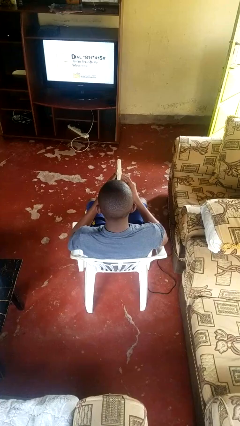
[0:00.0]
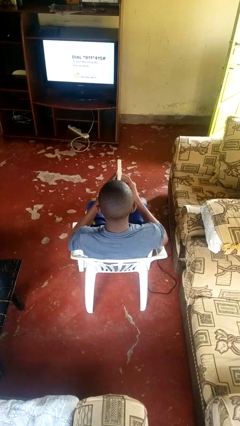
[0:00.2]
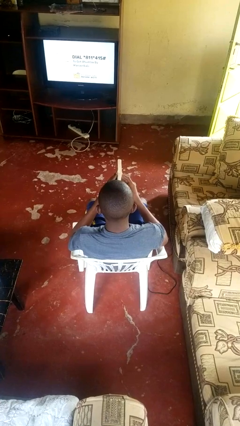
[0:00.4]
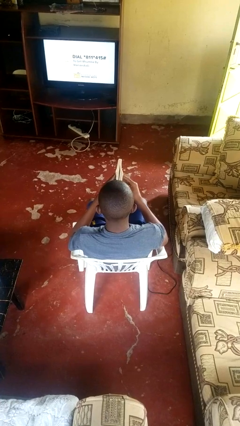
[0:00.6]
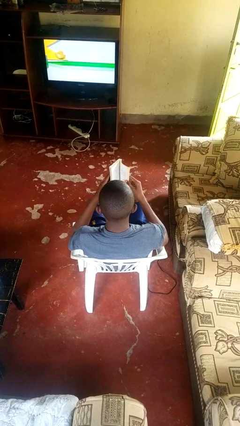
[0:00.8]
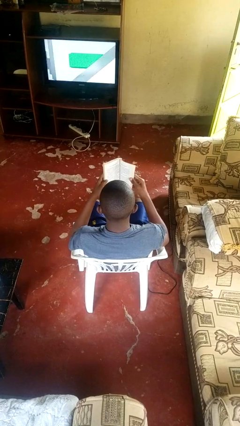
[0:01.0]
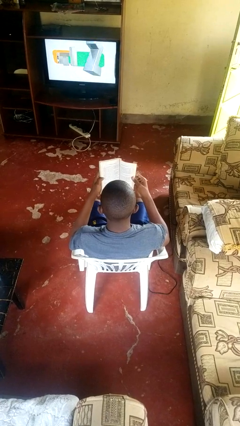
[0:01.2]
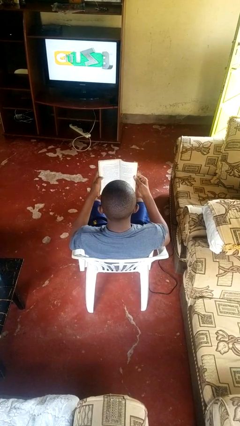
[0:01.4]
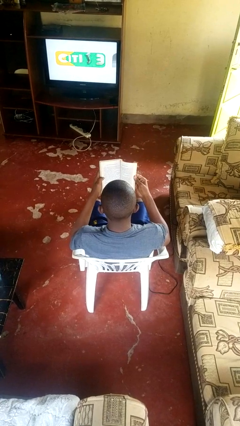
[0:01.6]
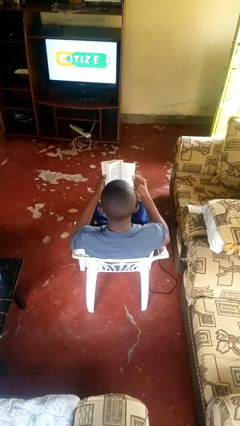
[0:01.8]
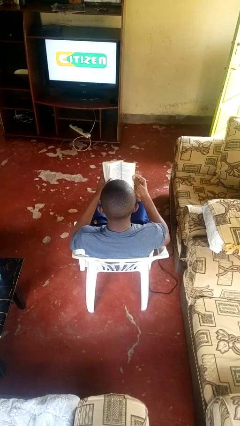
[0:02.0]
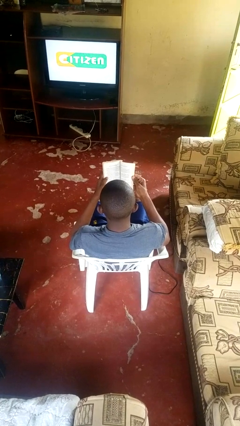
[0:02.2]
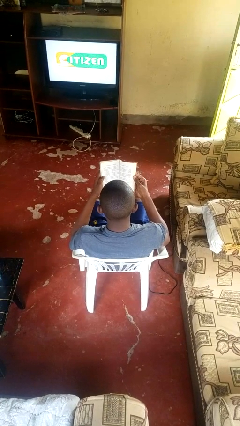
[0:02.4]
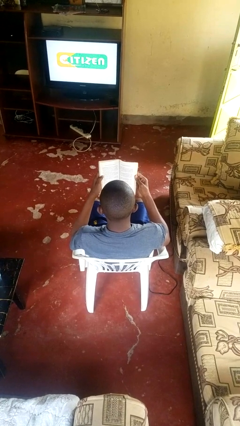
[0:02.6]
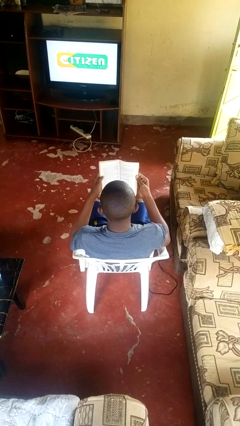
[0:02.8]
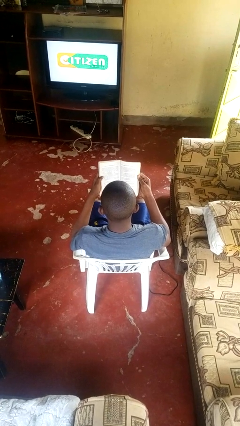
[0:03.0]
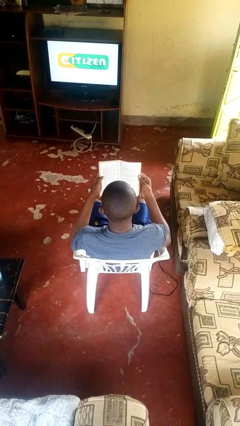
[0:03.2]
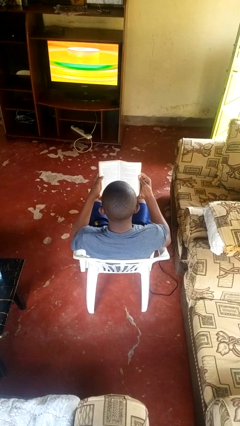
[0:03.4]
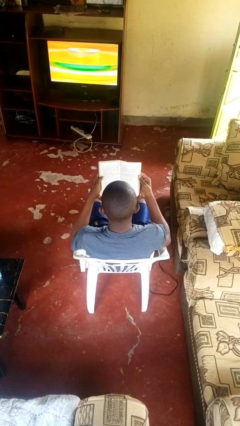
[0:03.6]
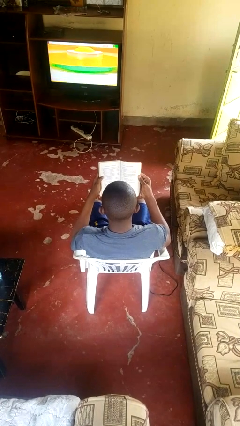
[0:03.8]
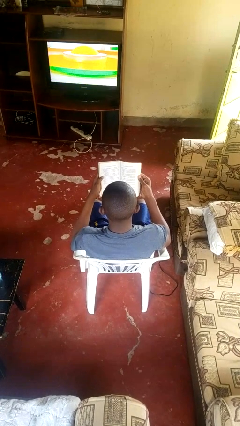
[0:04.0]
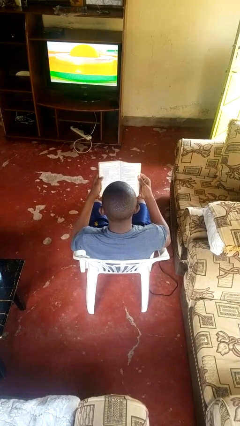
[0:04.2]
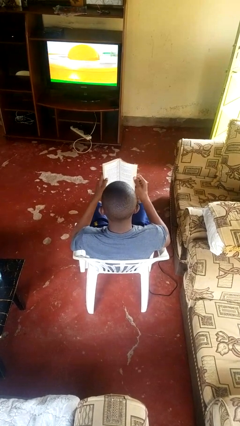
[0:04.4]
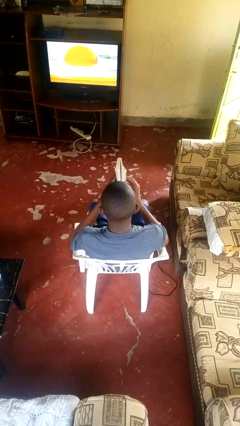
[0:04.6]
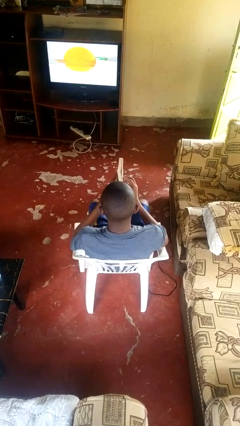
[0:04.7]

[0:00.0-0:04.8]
person reads book

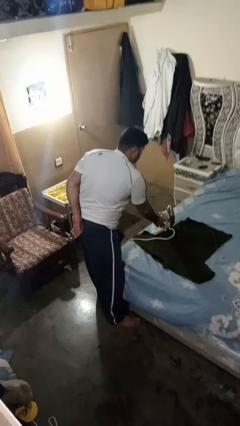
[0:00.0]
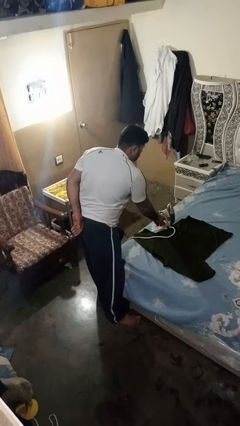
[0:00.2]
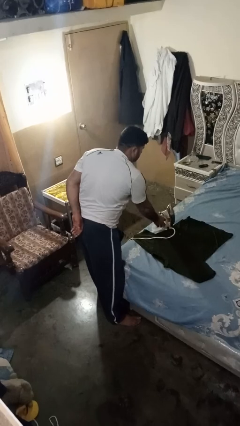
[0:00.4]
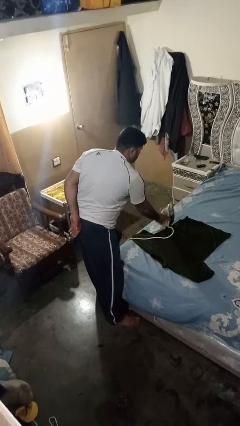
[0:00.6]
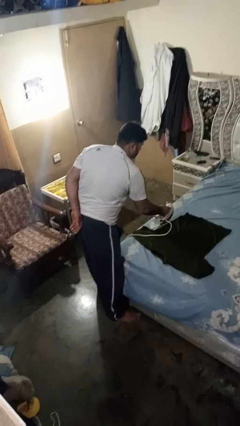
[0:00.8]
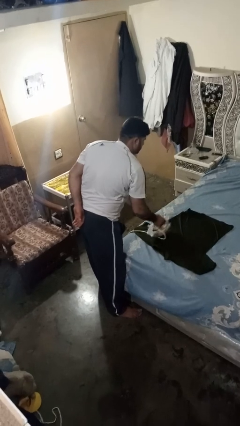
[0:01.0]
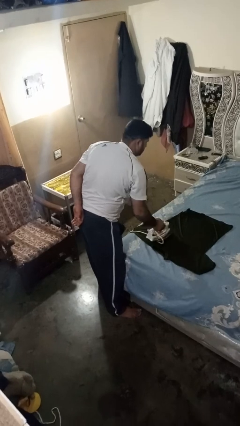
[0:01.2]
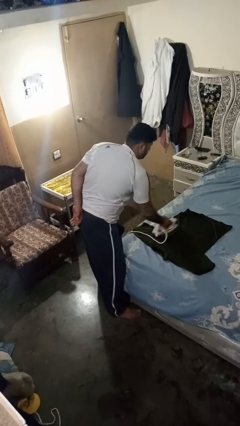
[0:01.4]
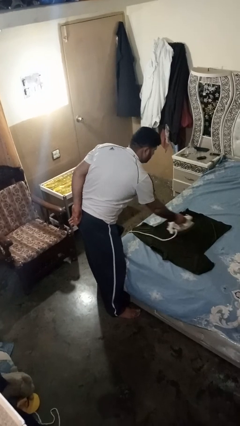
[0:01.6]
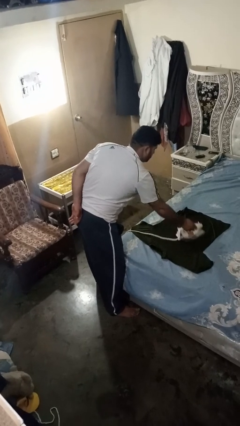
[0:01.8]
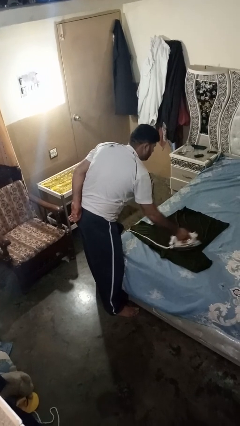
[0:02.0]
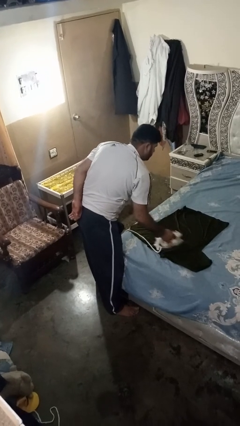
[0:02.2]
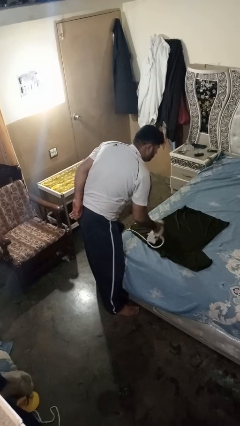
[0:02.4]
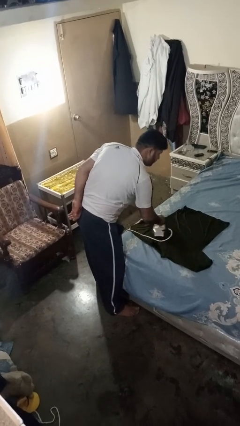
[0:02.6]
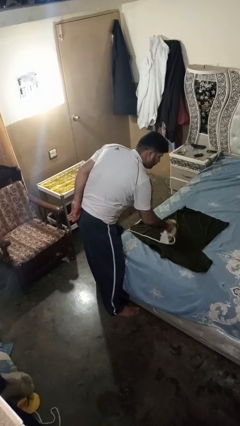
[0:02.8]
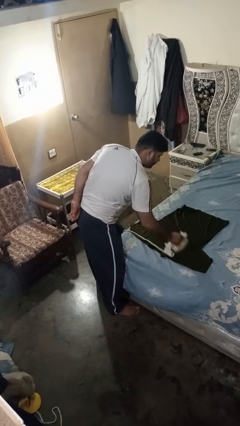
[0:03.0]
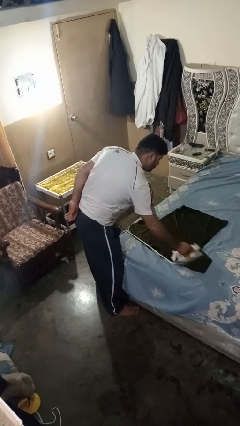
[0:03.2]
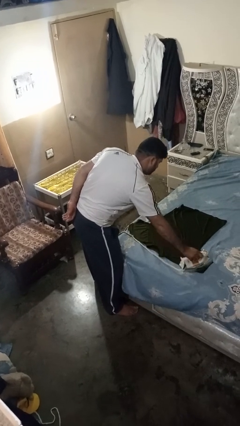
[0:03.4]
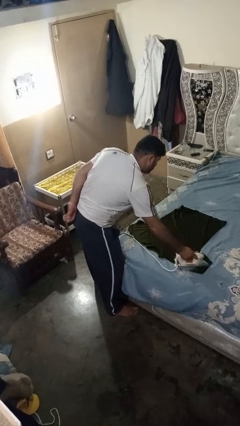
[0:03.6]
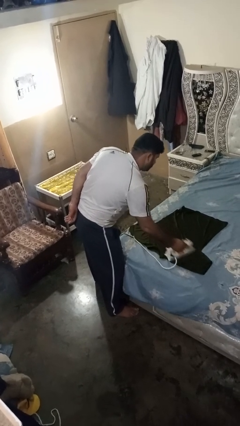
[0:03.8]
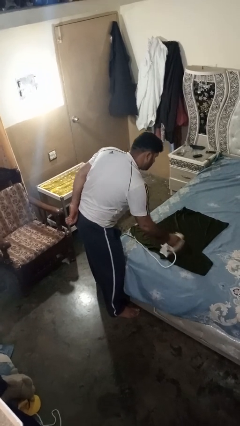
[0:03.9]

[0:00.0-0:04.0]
person irons clothes

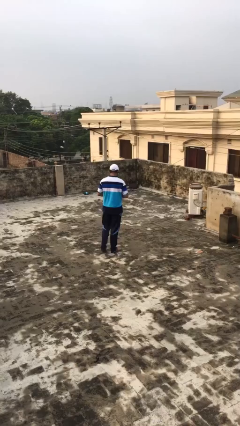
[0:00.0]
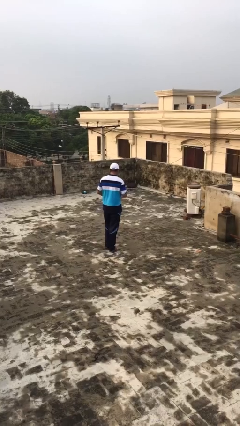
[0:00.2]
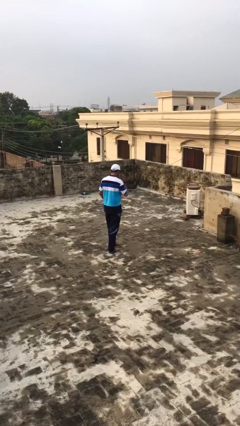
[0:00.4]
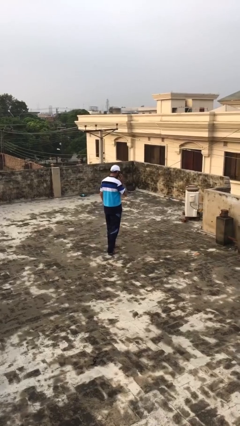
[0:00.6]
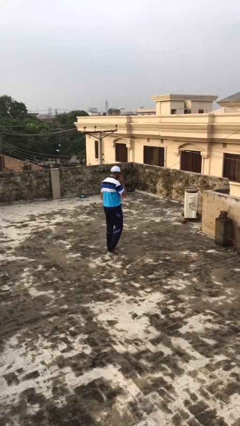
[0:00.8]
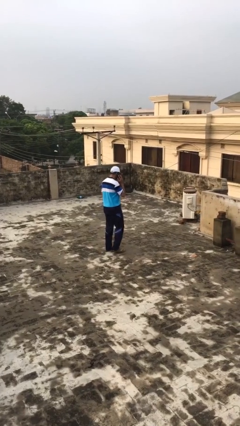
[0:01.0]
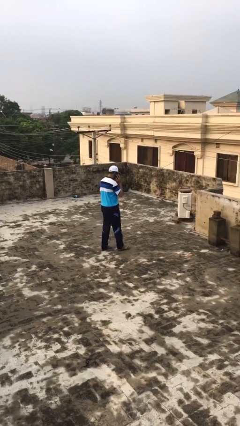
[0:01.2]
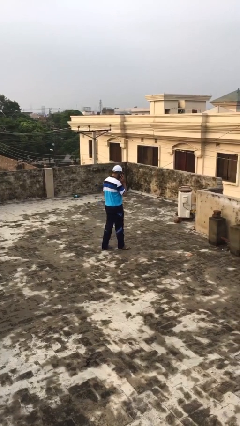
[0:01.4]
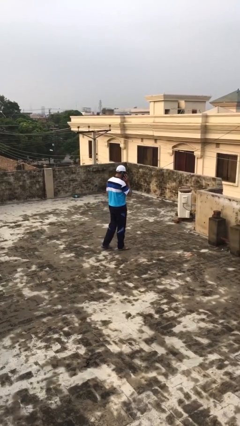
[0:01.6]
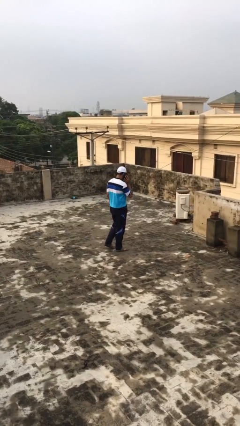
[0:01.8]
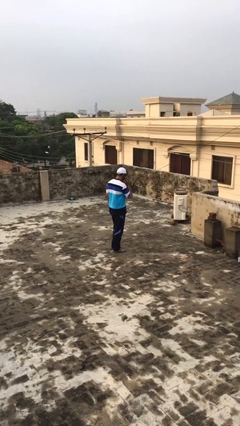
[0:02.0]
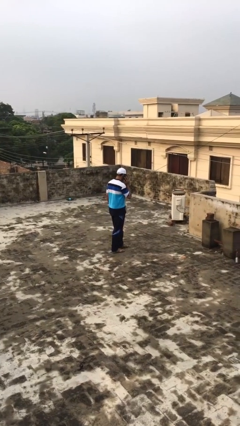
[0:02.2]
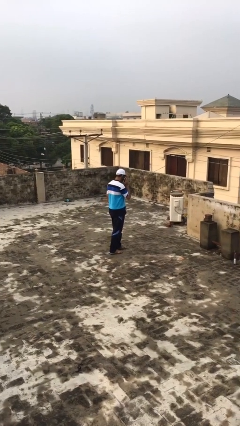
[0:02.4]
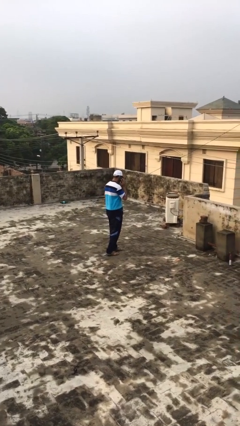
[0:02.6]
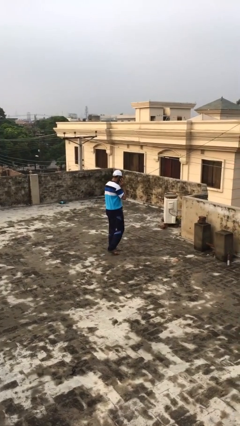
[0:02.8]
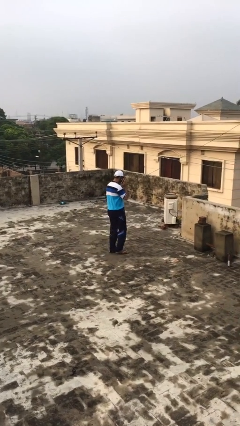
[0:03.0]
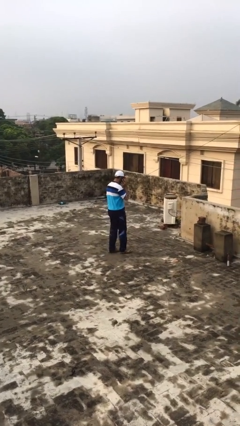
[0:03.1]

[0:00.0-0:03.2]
person talks on phone

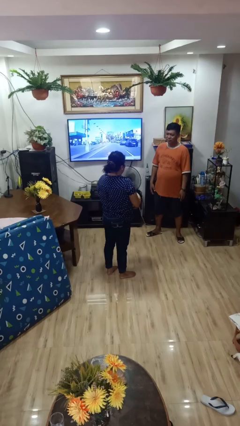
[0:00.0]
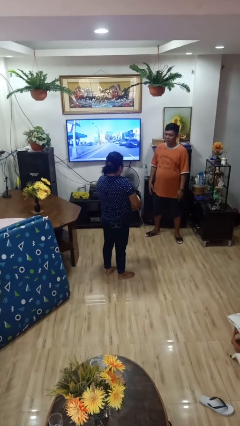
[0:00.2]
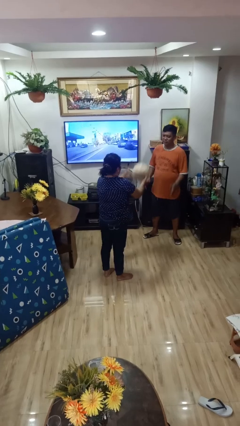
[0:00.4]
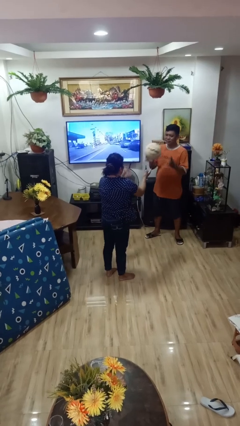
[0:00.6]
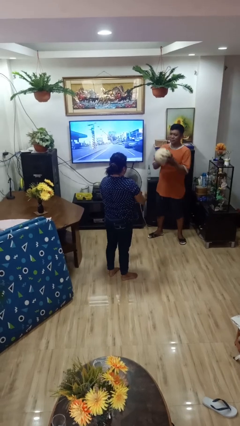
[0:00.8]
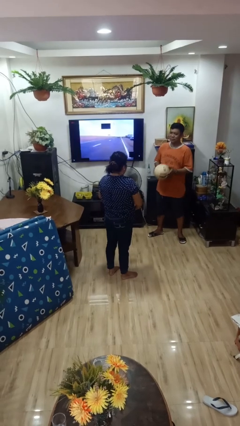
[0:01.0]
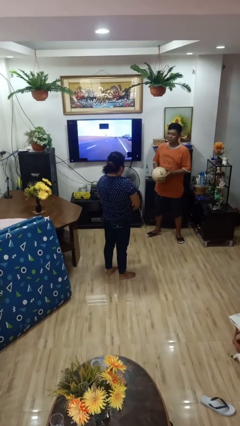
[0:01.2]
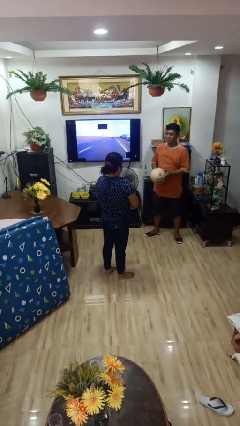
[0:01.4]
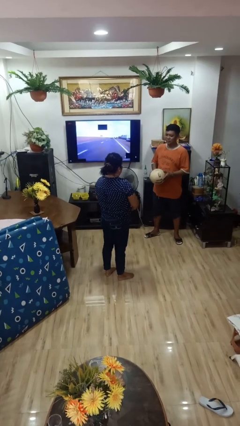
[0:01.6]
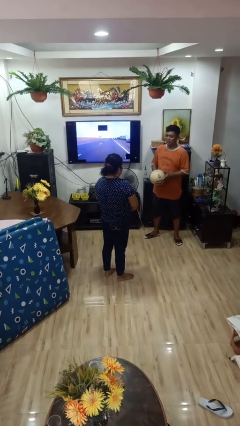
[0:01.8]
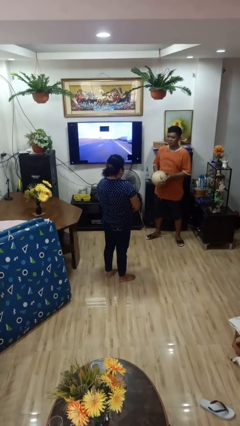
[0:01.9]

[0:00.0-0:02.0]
person throws object to person

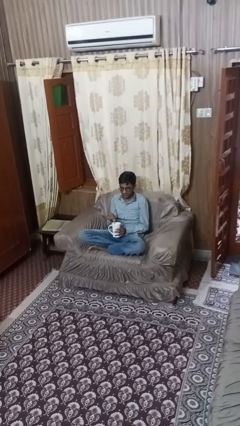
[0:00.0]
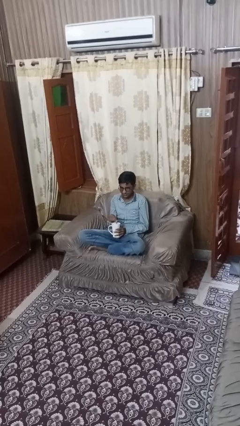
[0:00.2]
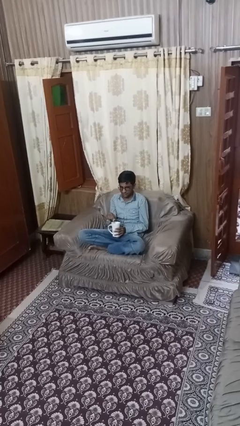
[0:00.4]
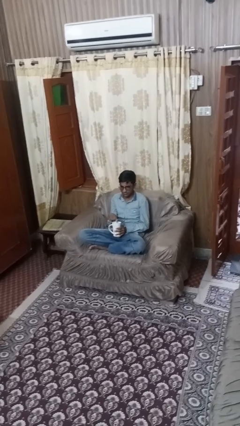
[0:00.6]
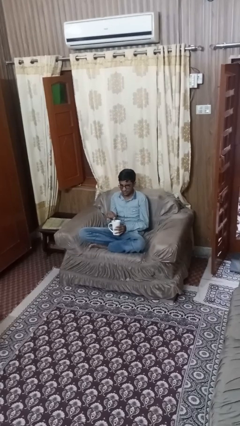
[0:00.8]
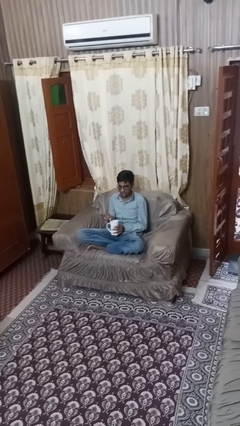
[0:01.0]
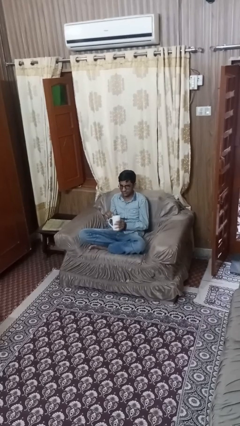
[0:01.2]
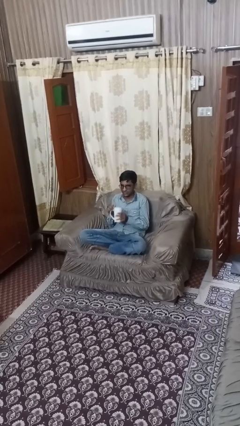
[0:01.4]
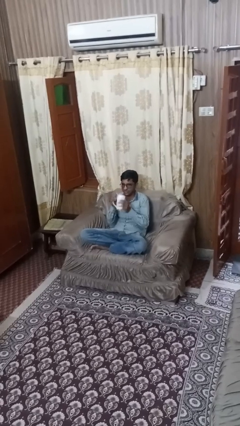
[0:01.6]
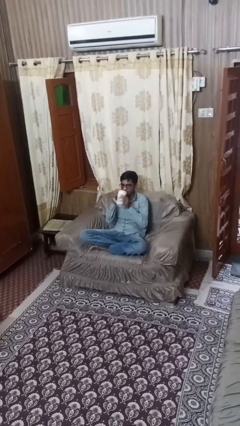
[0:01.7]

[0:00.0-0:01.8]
person stirs mug

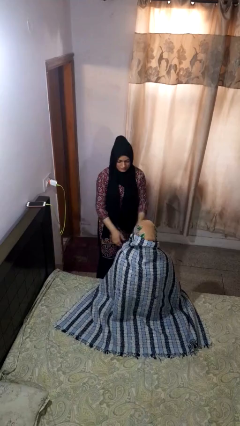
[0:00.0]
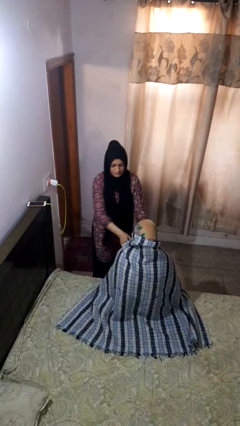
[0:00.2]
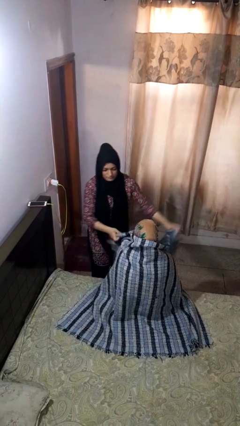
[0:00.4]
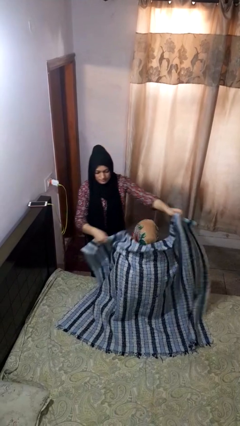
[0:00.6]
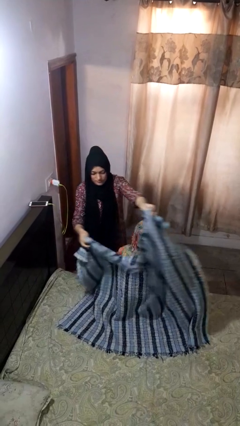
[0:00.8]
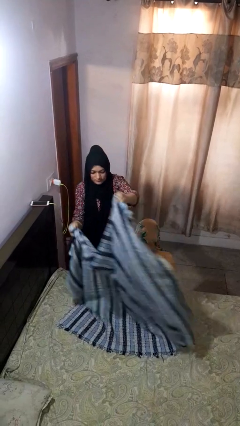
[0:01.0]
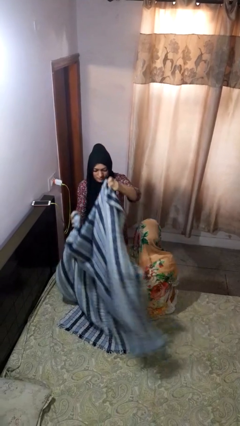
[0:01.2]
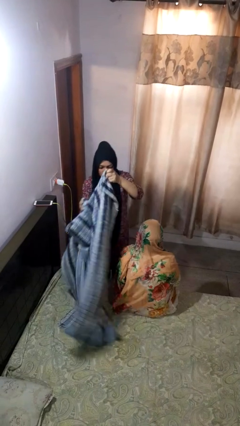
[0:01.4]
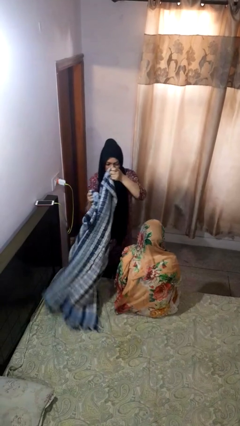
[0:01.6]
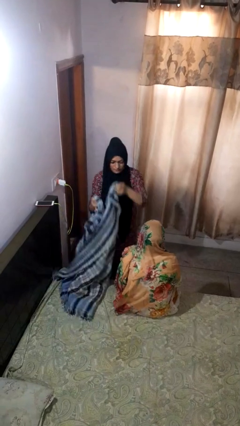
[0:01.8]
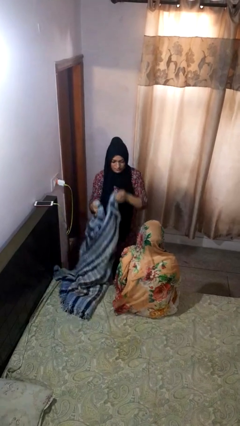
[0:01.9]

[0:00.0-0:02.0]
person uncovers friend with blanket
